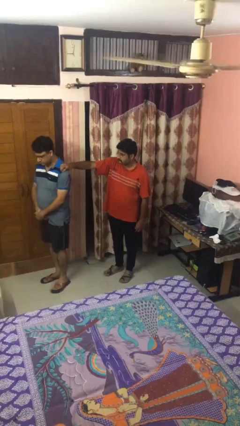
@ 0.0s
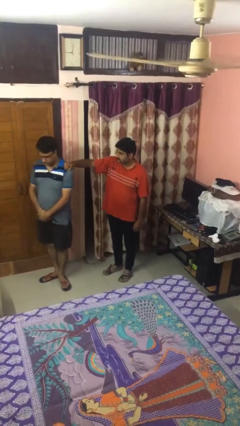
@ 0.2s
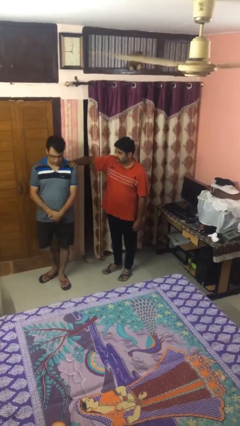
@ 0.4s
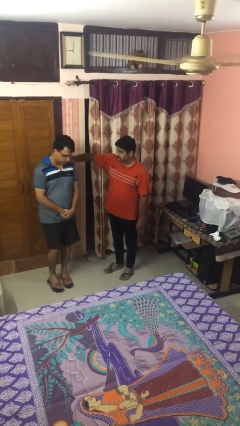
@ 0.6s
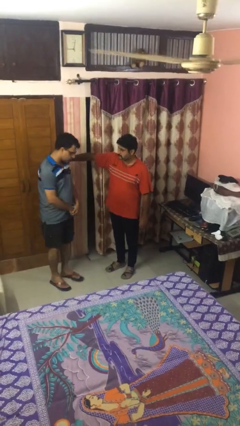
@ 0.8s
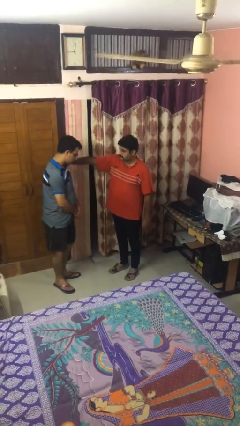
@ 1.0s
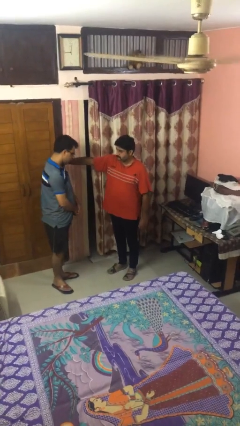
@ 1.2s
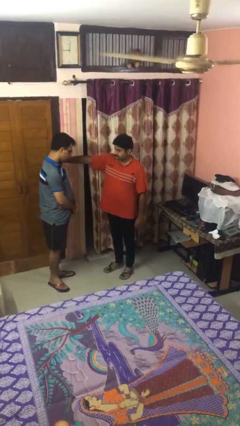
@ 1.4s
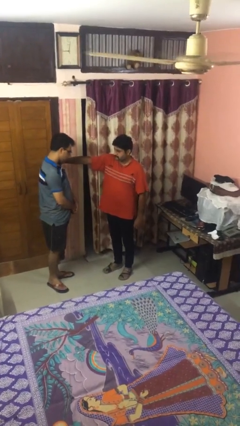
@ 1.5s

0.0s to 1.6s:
person spins person around

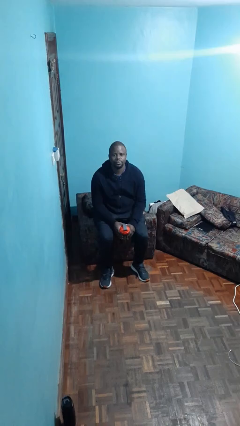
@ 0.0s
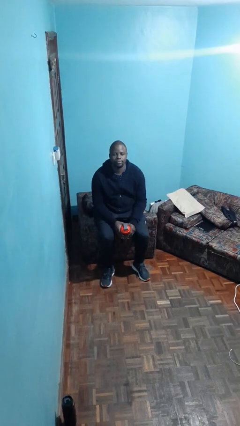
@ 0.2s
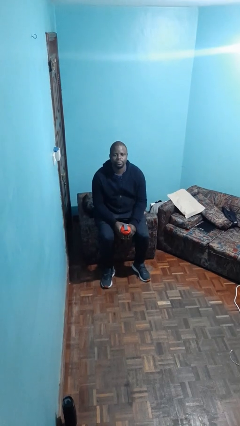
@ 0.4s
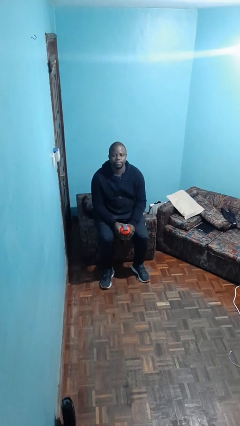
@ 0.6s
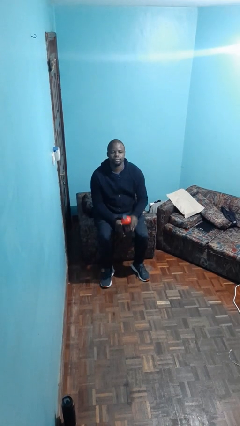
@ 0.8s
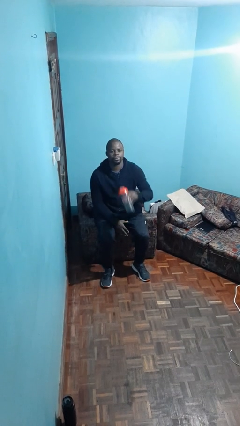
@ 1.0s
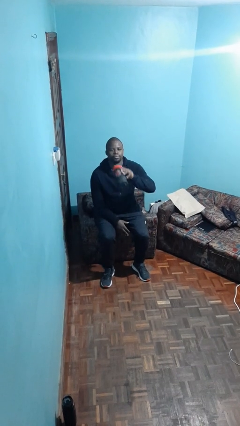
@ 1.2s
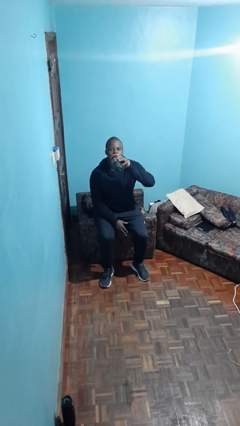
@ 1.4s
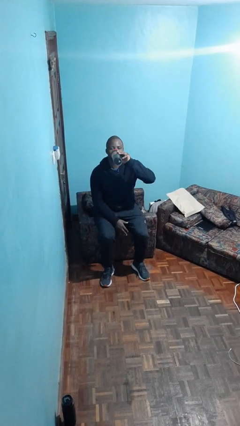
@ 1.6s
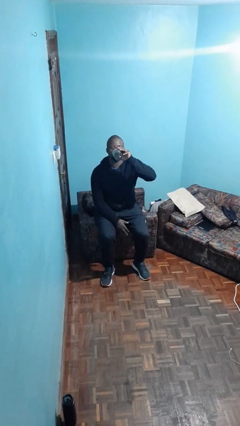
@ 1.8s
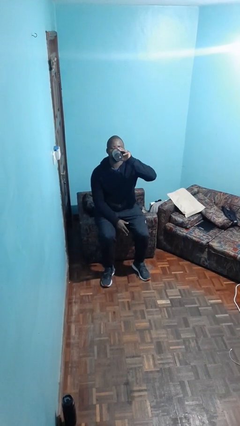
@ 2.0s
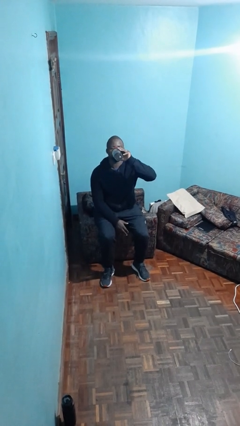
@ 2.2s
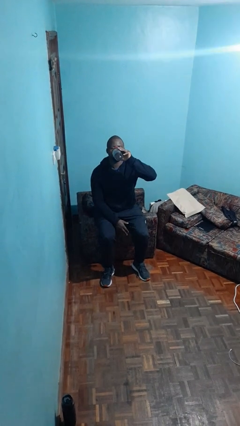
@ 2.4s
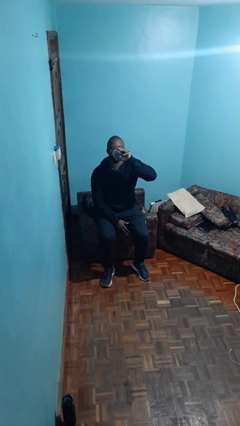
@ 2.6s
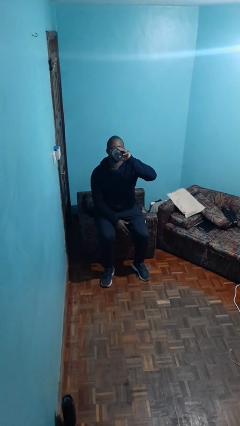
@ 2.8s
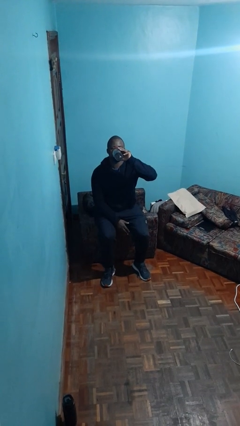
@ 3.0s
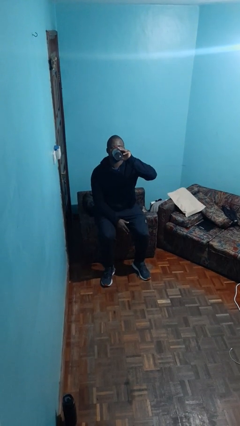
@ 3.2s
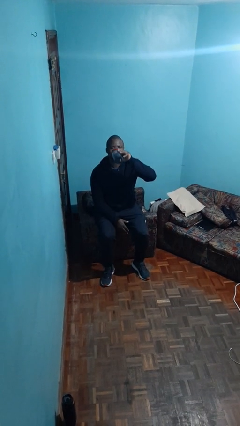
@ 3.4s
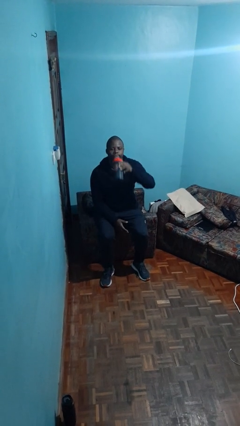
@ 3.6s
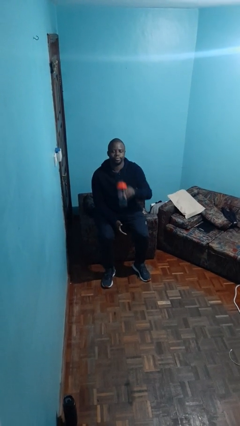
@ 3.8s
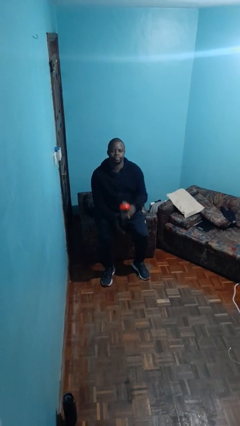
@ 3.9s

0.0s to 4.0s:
person drinks from bottle

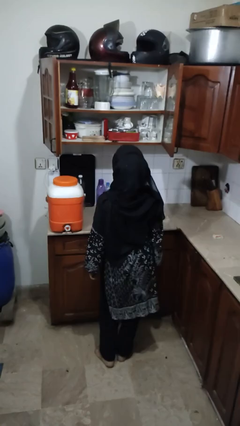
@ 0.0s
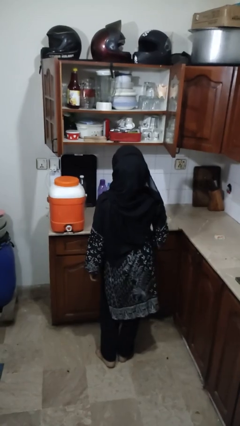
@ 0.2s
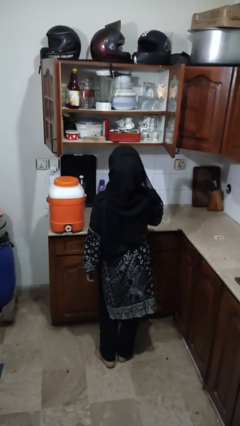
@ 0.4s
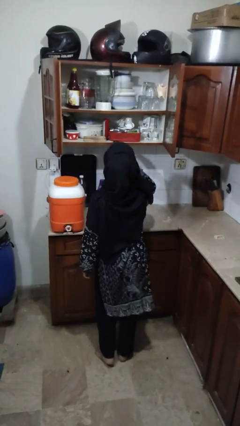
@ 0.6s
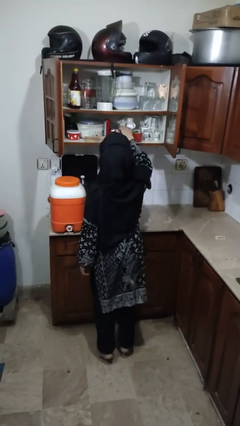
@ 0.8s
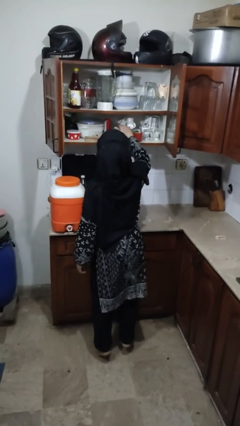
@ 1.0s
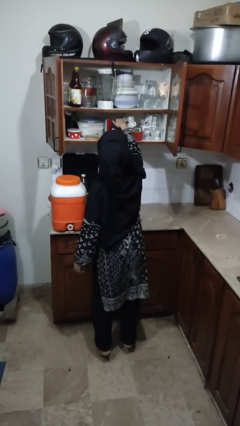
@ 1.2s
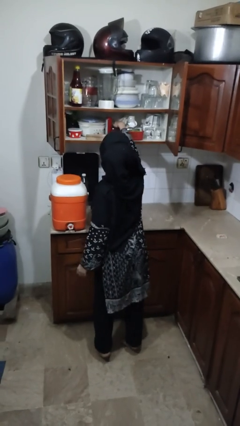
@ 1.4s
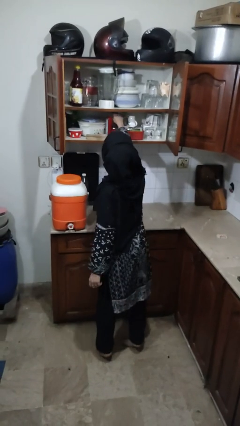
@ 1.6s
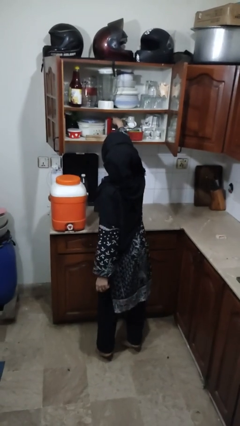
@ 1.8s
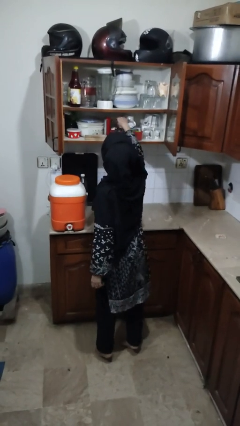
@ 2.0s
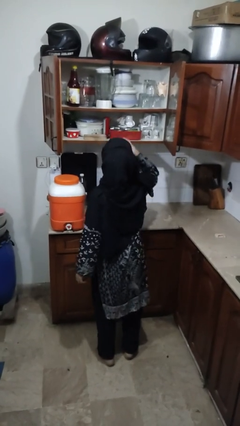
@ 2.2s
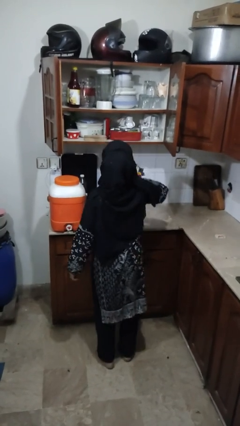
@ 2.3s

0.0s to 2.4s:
person searches in cabinet

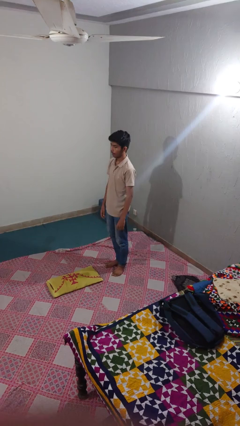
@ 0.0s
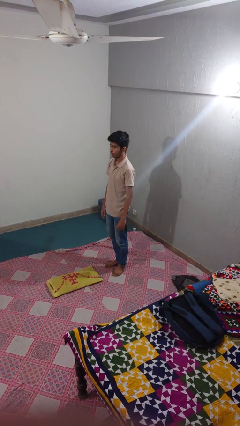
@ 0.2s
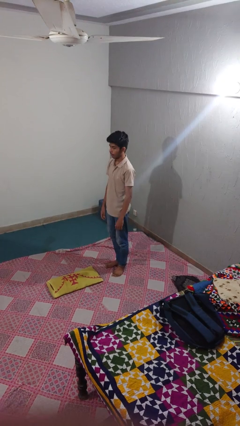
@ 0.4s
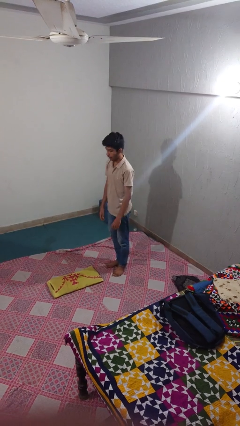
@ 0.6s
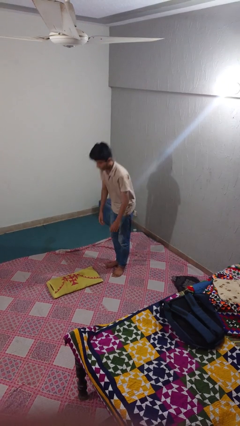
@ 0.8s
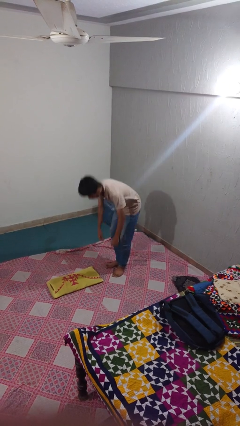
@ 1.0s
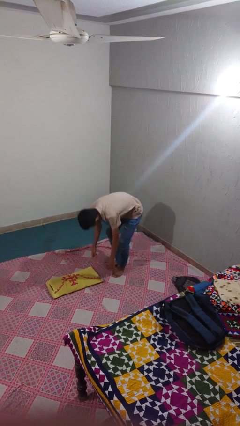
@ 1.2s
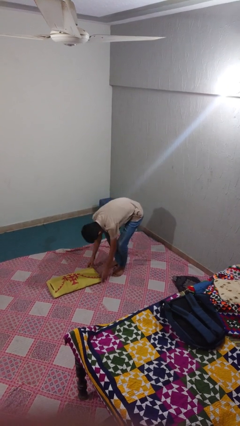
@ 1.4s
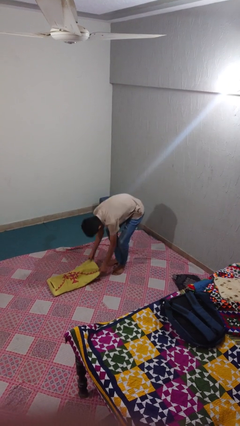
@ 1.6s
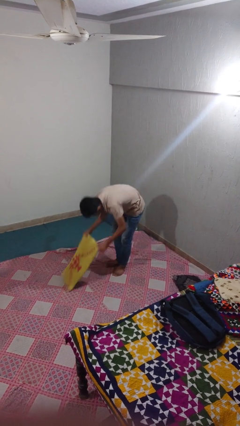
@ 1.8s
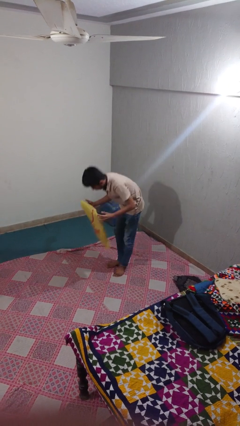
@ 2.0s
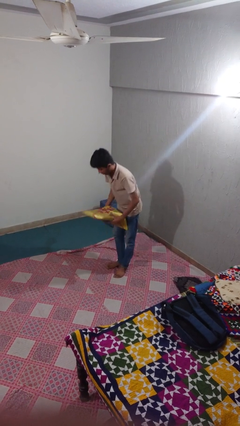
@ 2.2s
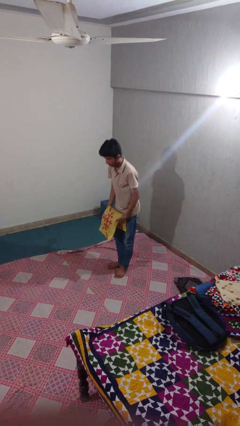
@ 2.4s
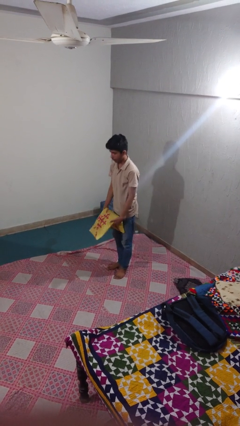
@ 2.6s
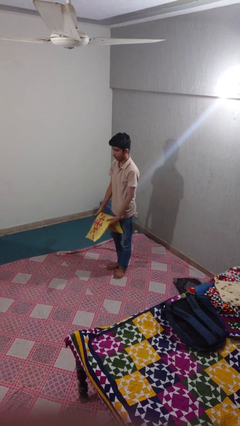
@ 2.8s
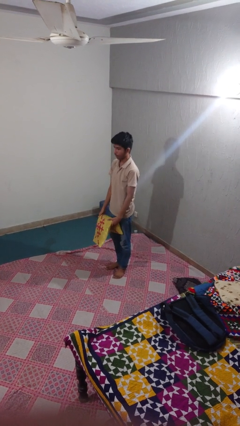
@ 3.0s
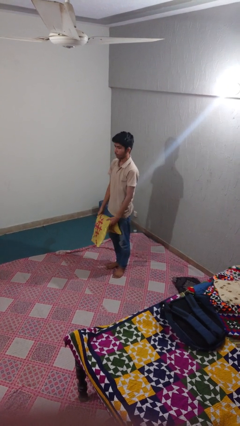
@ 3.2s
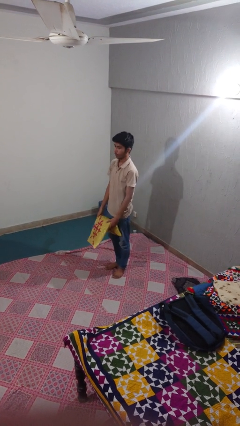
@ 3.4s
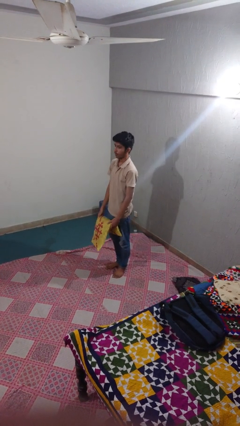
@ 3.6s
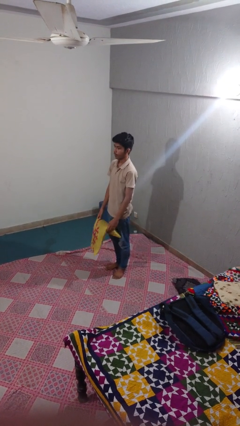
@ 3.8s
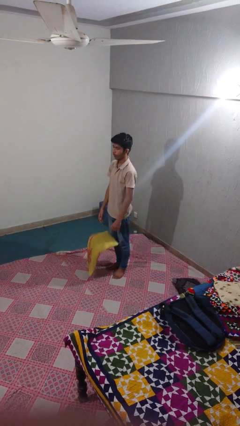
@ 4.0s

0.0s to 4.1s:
person picks up object from floor

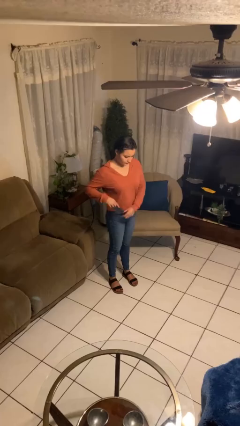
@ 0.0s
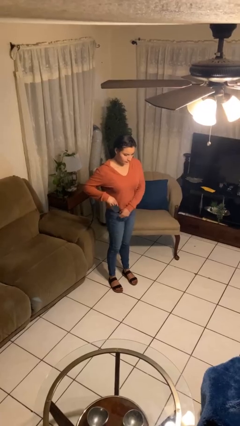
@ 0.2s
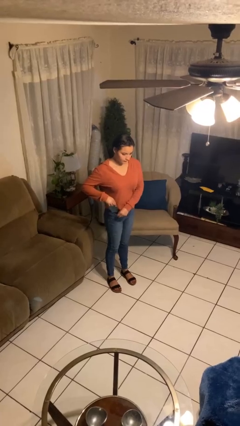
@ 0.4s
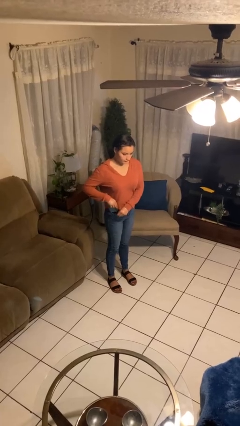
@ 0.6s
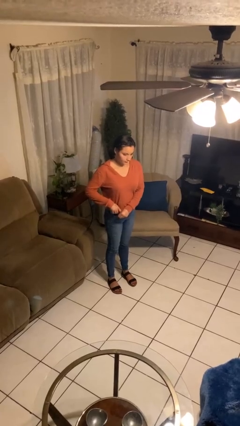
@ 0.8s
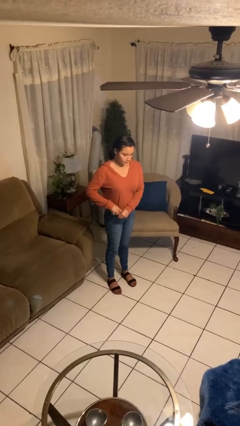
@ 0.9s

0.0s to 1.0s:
person puts phone into pocket

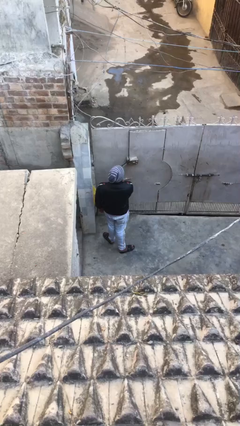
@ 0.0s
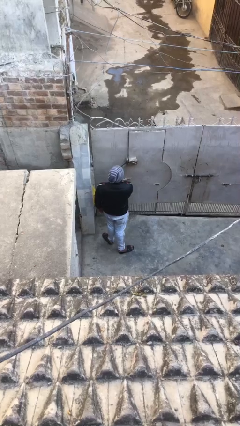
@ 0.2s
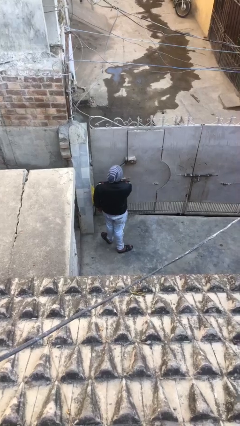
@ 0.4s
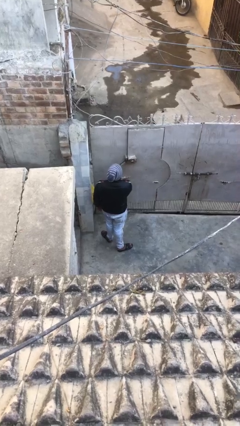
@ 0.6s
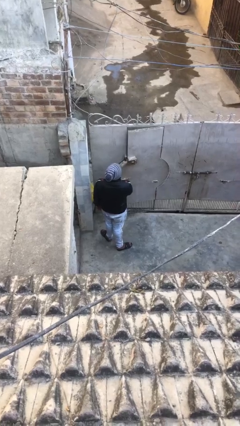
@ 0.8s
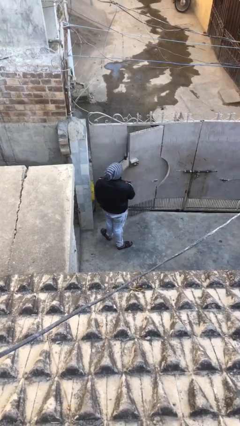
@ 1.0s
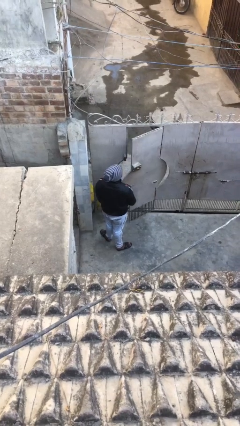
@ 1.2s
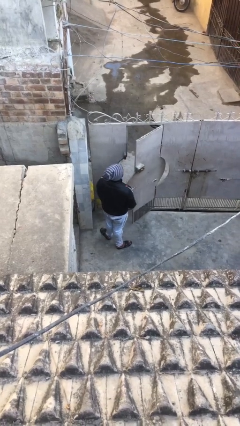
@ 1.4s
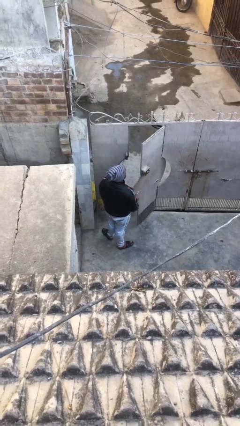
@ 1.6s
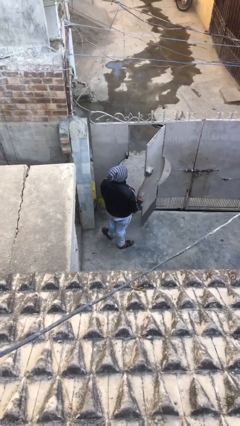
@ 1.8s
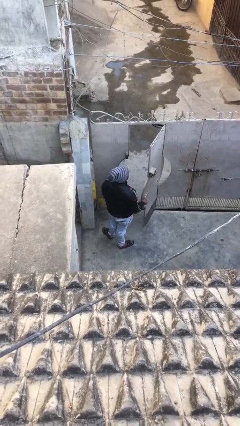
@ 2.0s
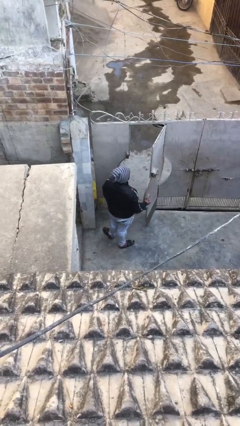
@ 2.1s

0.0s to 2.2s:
person opens facility door

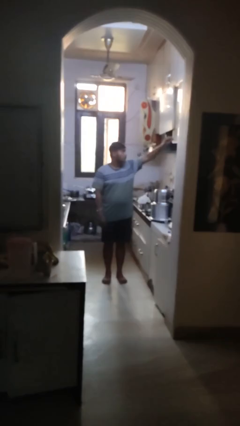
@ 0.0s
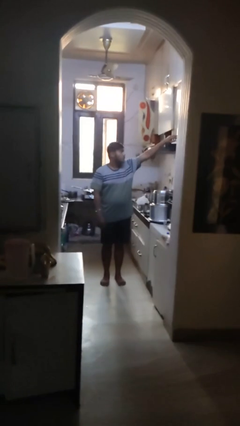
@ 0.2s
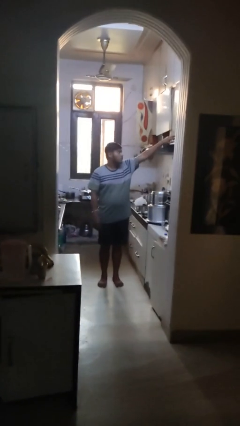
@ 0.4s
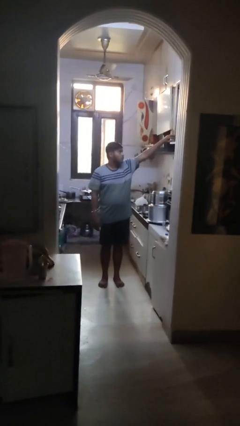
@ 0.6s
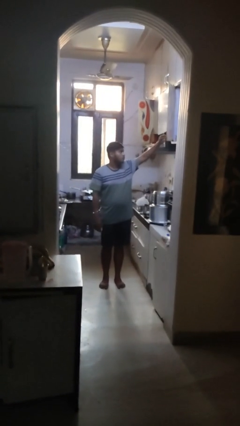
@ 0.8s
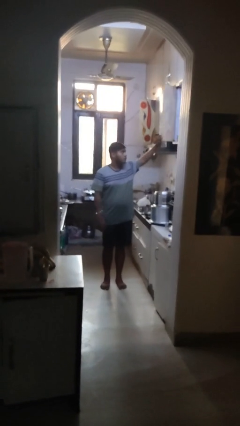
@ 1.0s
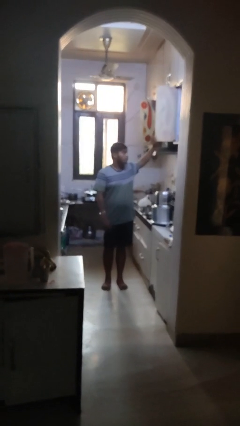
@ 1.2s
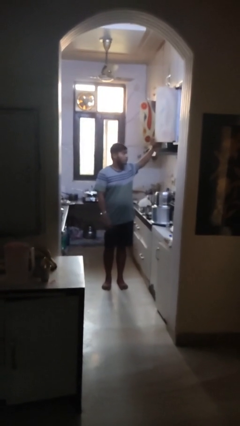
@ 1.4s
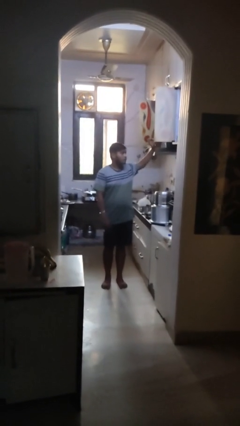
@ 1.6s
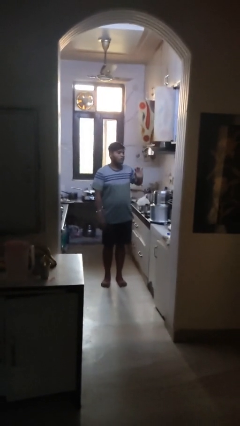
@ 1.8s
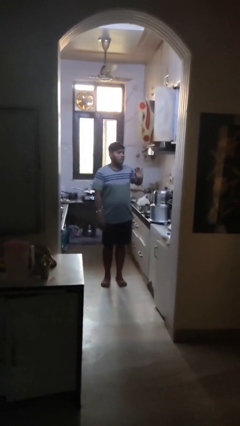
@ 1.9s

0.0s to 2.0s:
person opens cabinet
